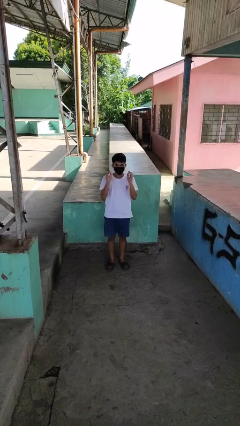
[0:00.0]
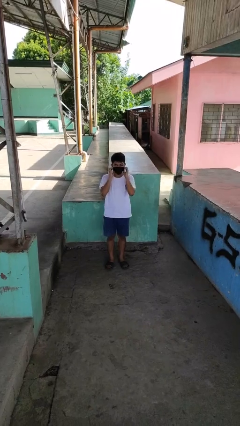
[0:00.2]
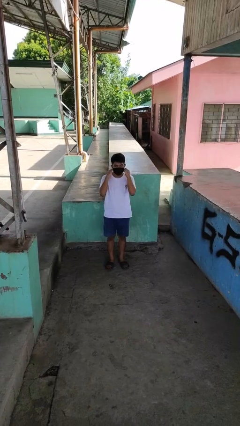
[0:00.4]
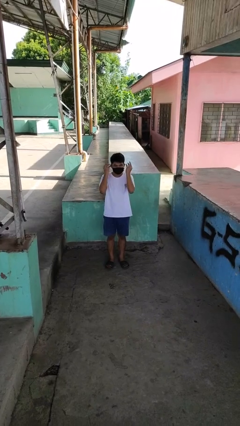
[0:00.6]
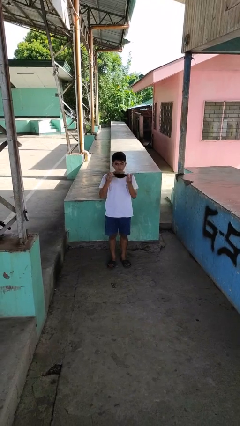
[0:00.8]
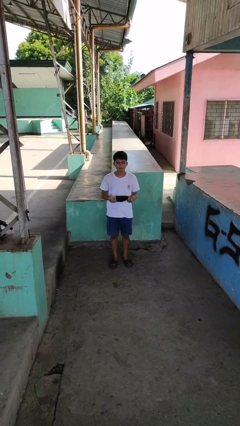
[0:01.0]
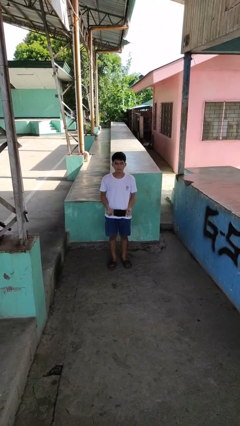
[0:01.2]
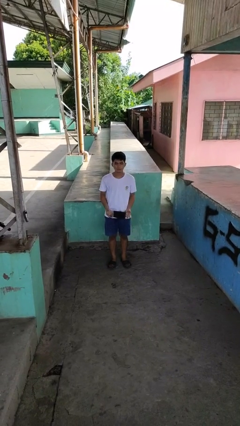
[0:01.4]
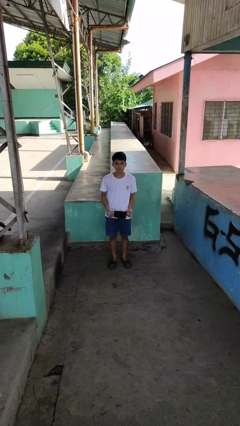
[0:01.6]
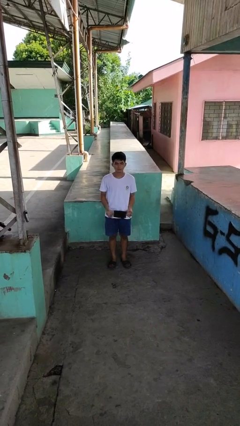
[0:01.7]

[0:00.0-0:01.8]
person takes off facemask

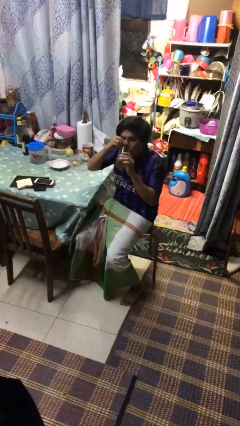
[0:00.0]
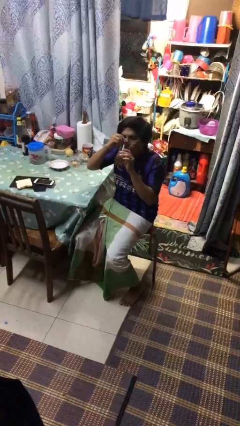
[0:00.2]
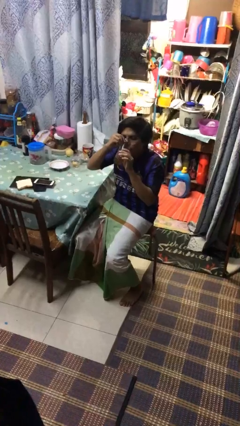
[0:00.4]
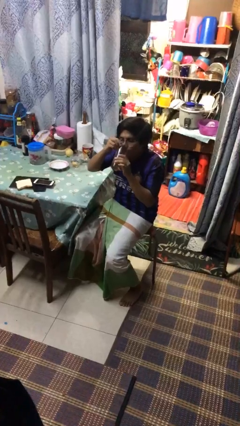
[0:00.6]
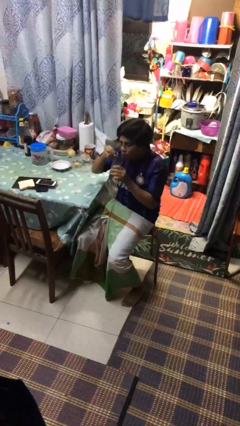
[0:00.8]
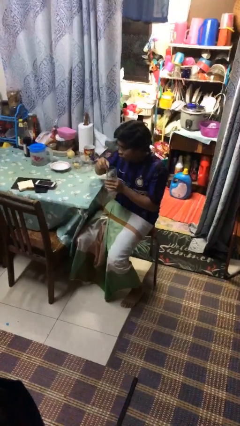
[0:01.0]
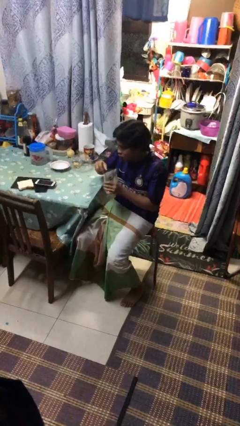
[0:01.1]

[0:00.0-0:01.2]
person drinks from mug

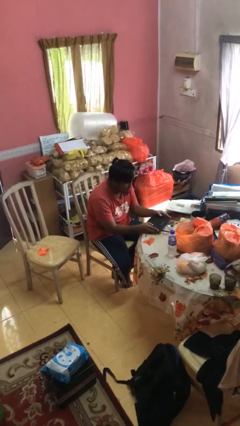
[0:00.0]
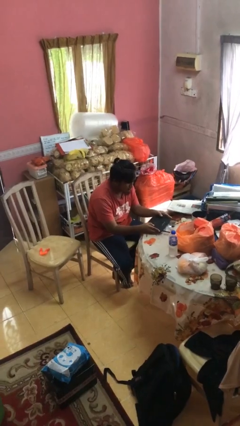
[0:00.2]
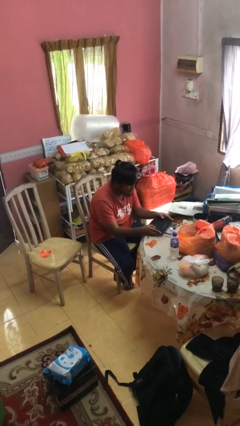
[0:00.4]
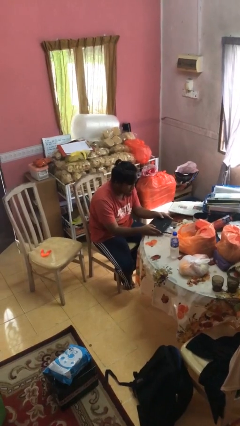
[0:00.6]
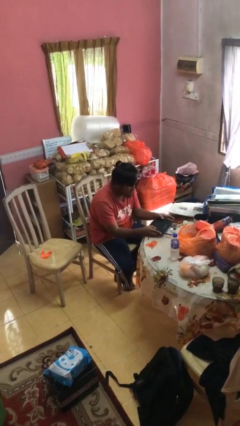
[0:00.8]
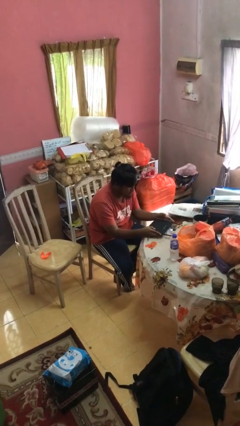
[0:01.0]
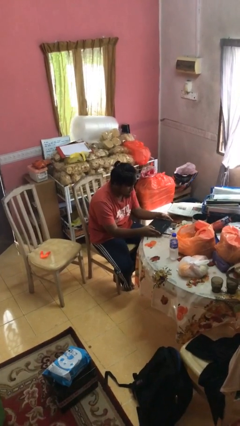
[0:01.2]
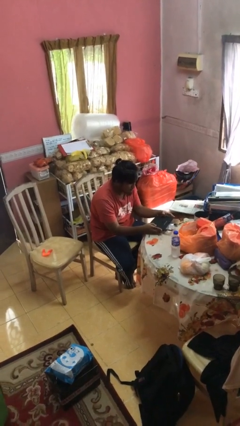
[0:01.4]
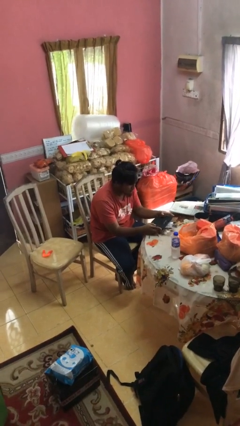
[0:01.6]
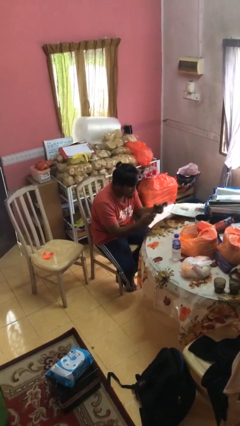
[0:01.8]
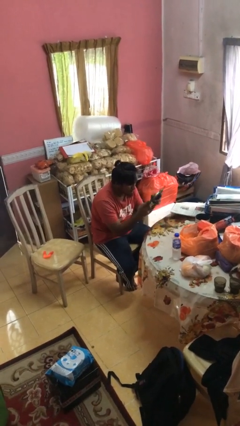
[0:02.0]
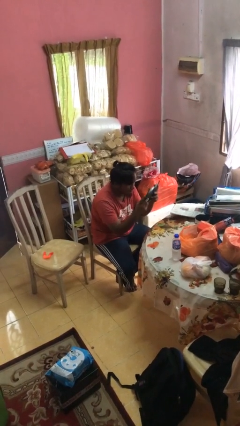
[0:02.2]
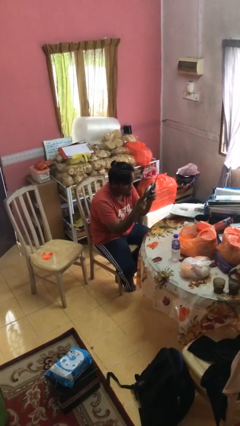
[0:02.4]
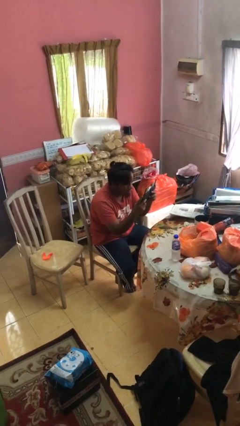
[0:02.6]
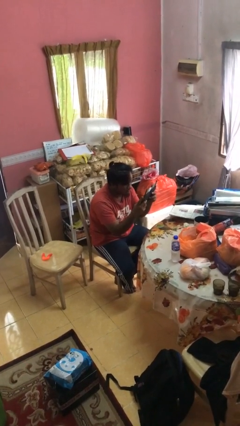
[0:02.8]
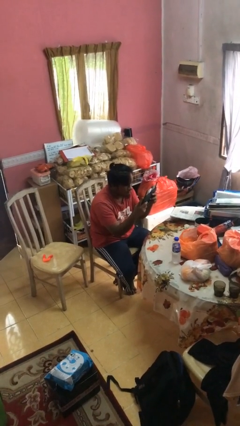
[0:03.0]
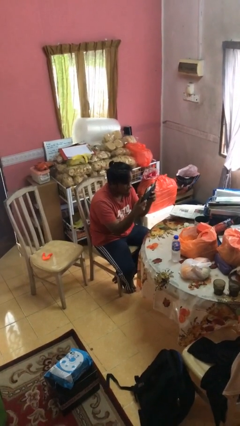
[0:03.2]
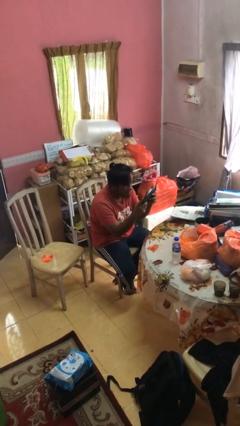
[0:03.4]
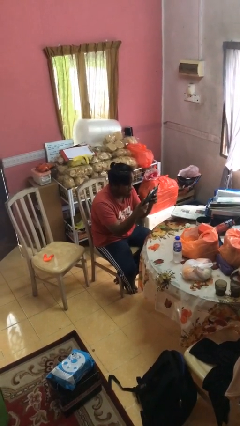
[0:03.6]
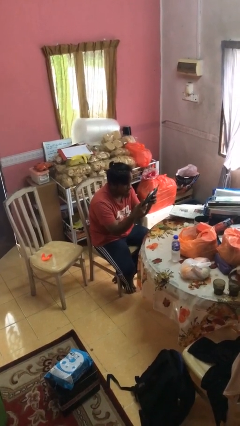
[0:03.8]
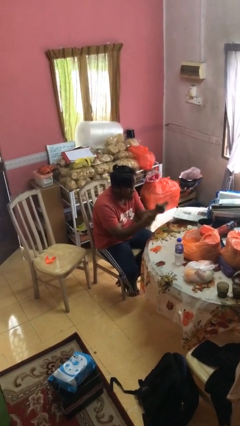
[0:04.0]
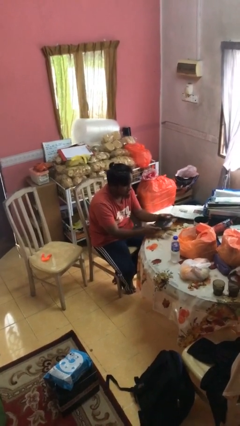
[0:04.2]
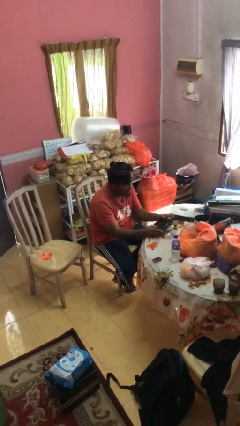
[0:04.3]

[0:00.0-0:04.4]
person interacts with handheld game

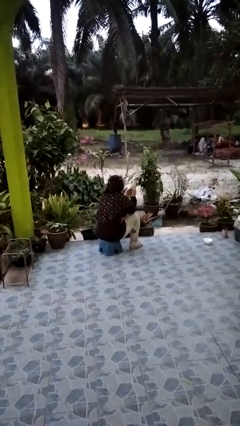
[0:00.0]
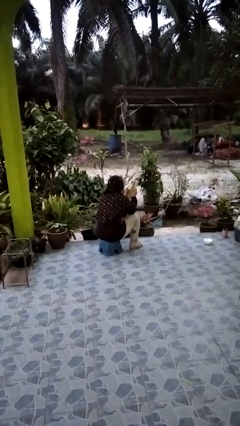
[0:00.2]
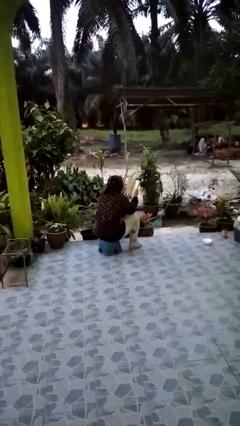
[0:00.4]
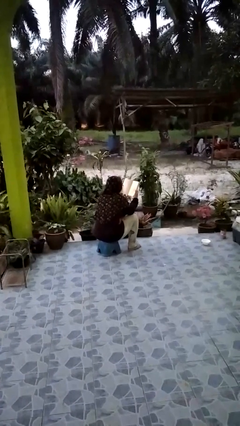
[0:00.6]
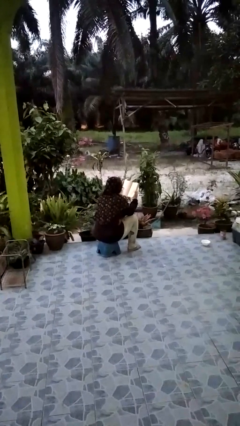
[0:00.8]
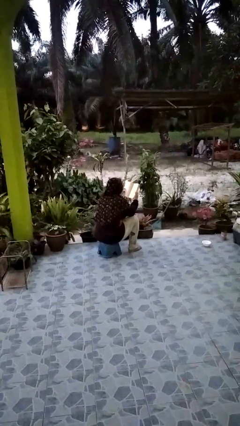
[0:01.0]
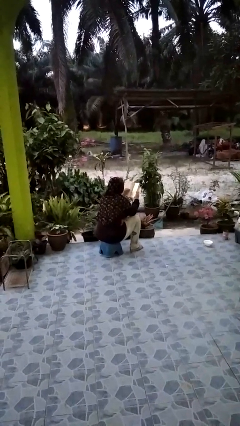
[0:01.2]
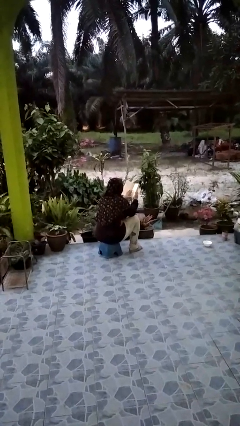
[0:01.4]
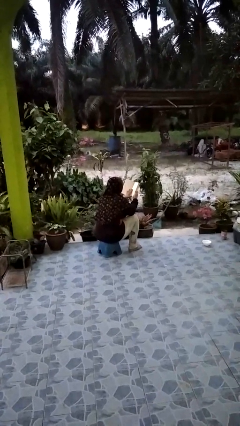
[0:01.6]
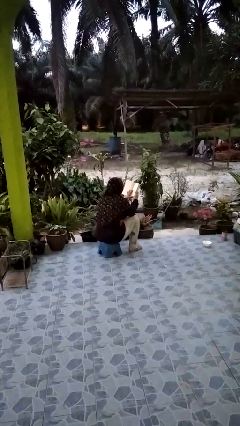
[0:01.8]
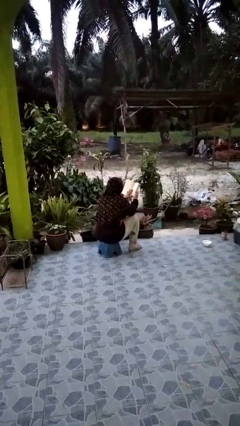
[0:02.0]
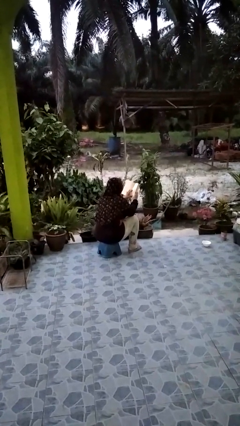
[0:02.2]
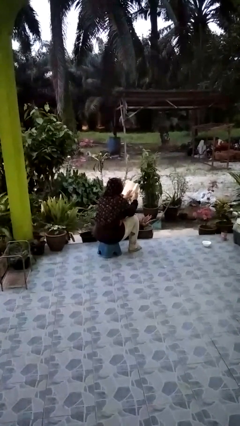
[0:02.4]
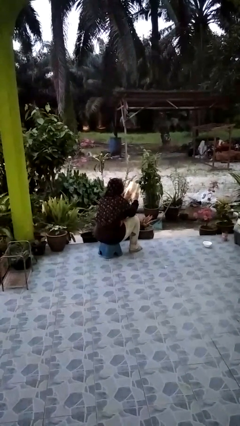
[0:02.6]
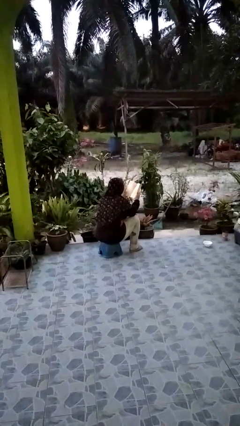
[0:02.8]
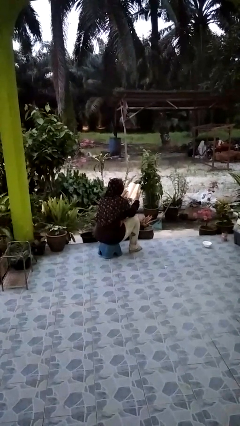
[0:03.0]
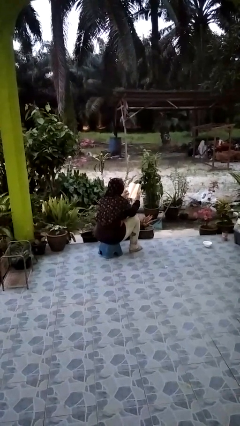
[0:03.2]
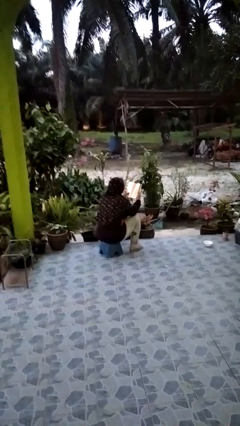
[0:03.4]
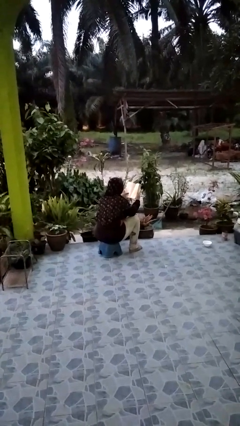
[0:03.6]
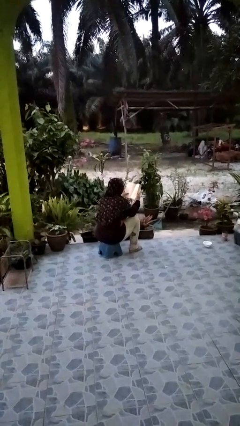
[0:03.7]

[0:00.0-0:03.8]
person reads book

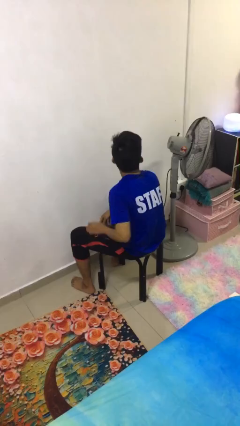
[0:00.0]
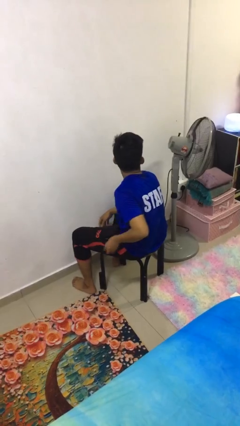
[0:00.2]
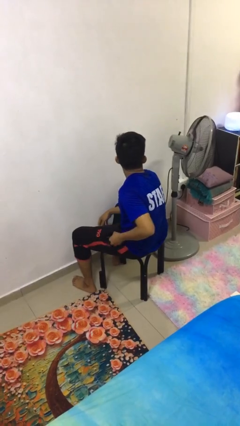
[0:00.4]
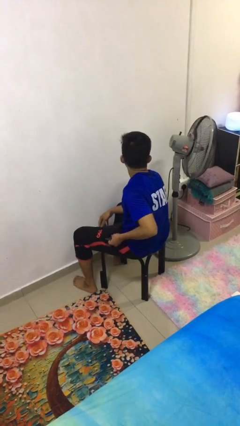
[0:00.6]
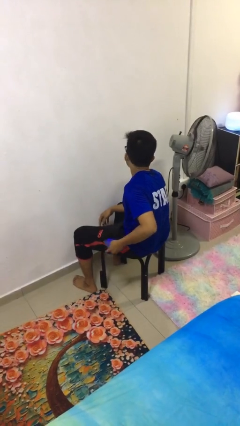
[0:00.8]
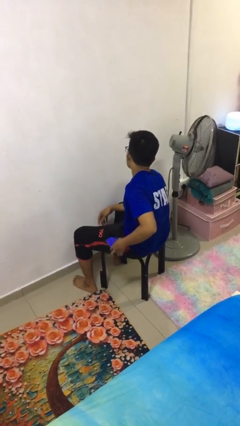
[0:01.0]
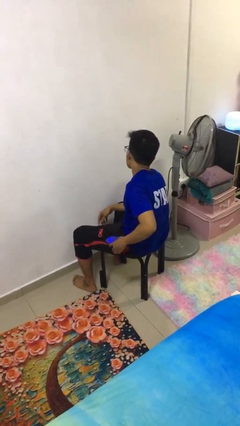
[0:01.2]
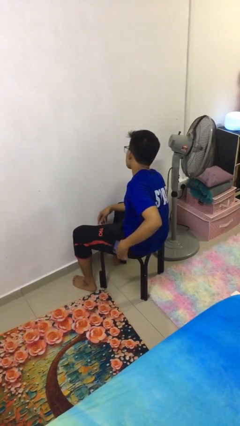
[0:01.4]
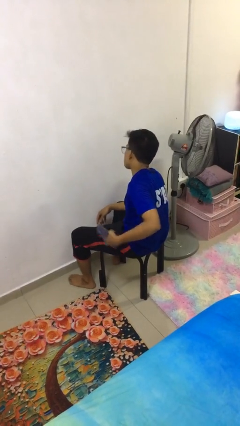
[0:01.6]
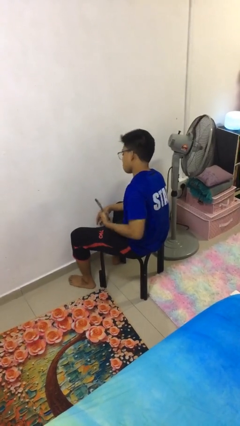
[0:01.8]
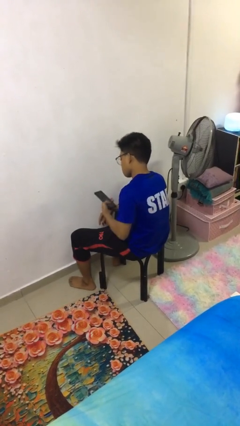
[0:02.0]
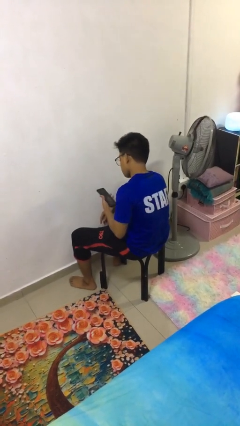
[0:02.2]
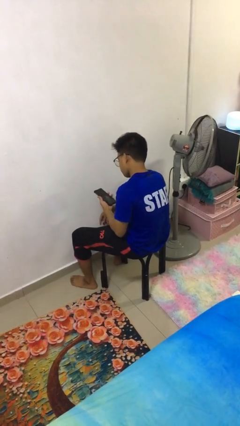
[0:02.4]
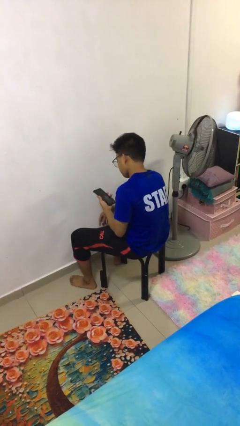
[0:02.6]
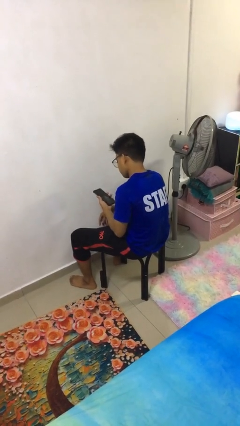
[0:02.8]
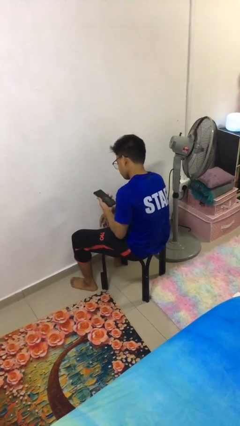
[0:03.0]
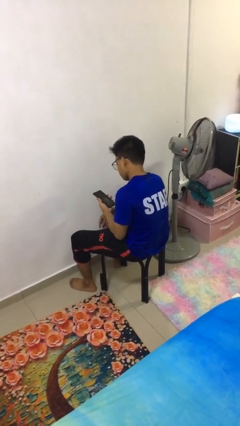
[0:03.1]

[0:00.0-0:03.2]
person takes phone from pocket

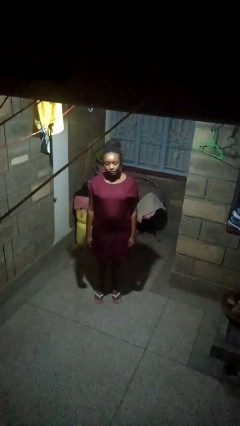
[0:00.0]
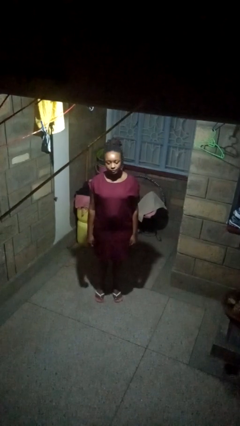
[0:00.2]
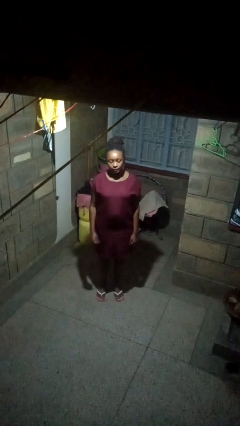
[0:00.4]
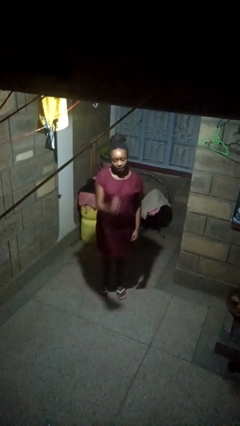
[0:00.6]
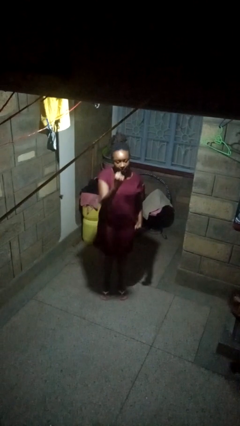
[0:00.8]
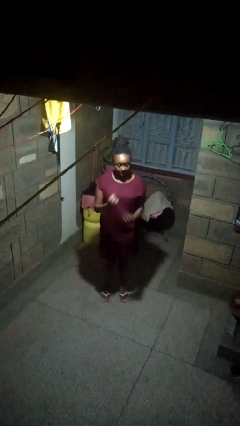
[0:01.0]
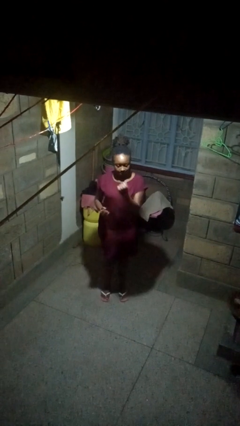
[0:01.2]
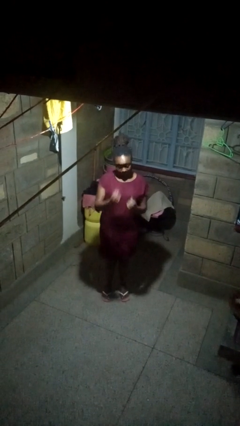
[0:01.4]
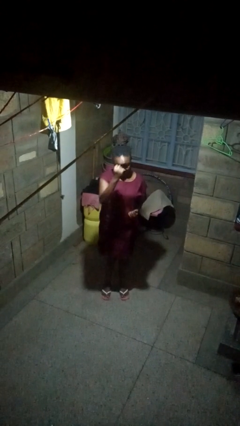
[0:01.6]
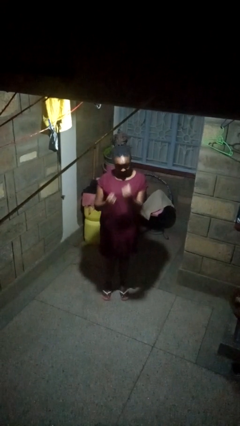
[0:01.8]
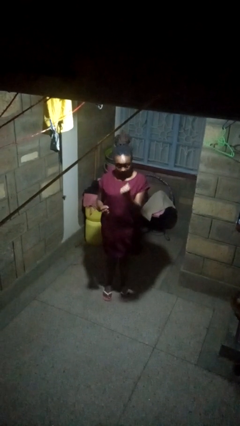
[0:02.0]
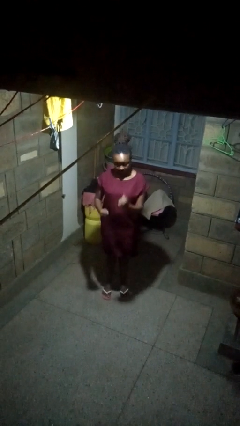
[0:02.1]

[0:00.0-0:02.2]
person punches

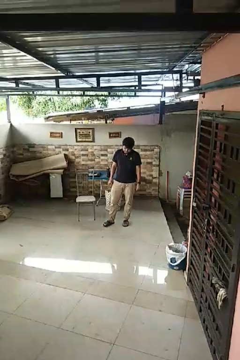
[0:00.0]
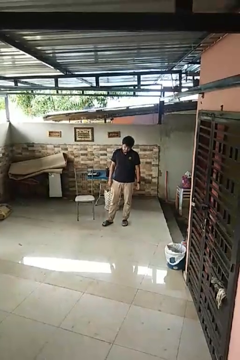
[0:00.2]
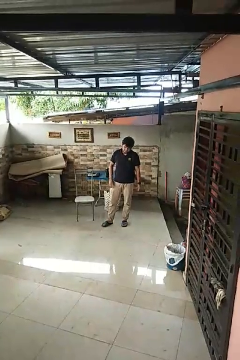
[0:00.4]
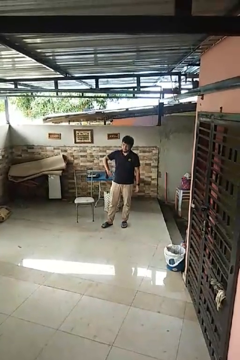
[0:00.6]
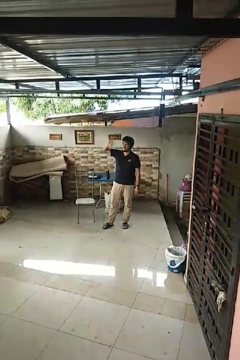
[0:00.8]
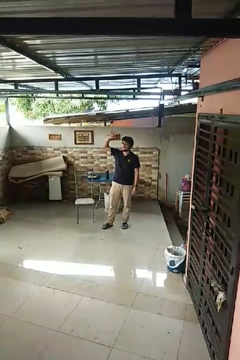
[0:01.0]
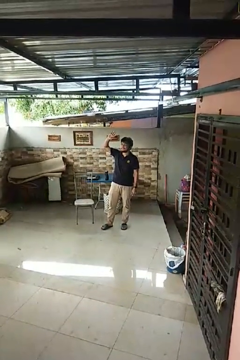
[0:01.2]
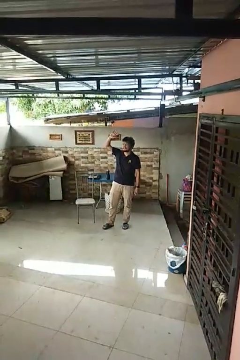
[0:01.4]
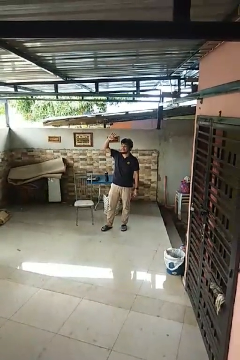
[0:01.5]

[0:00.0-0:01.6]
person gestures swipe up
